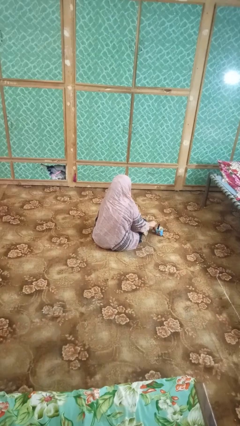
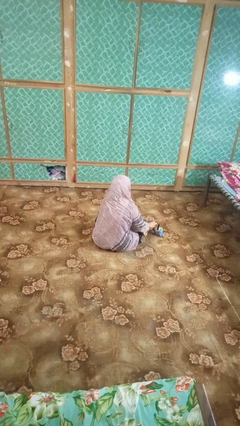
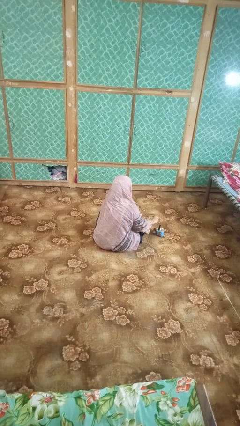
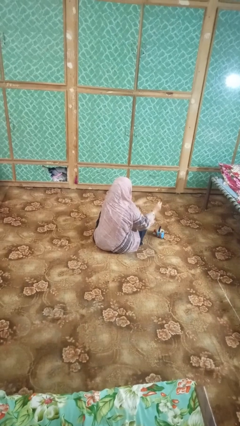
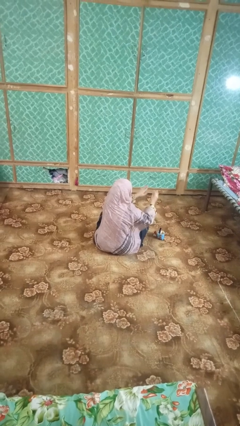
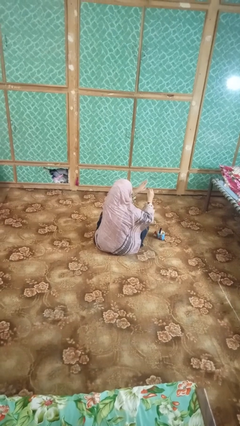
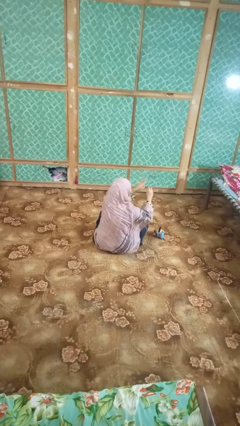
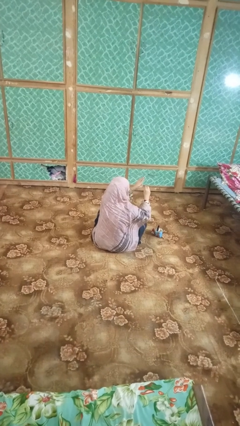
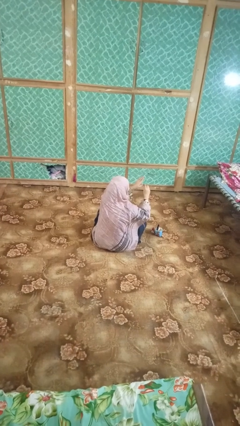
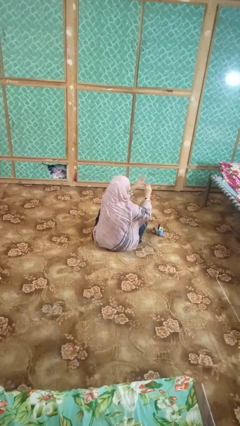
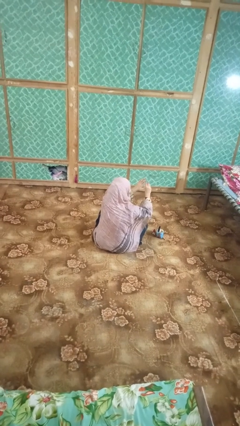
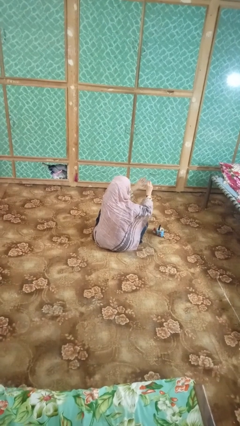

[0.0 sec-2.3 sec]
person paints fingernails

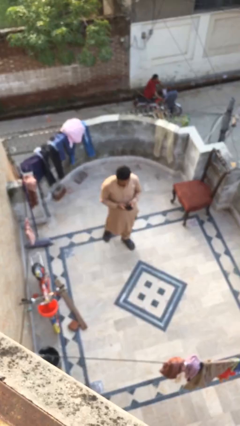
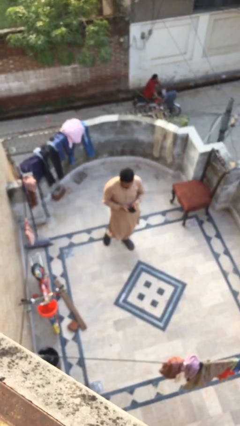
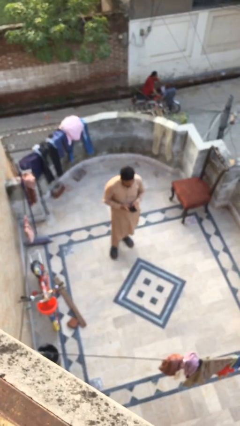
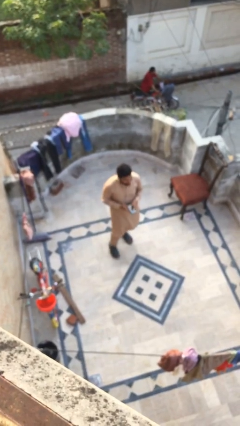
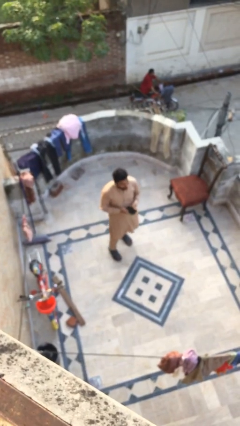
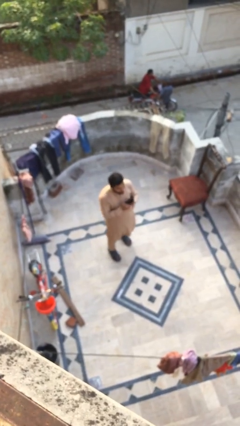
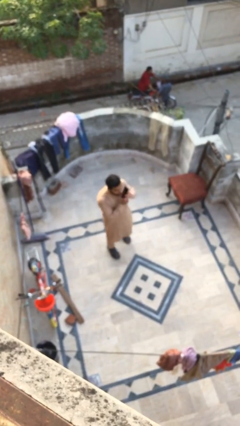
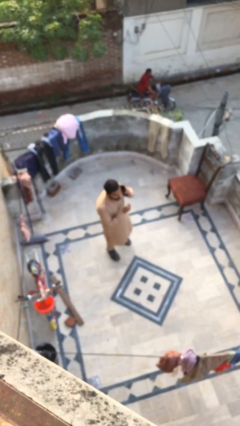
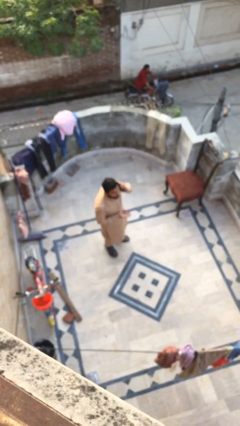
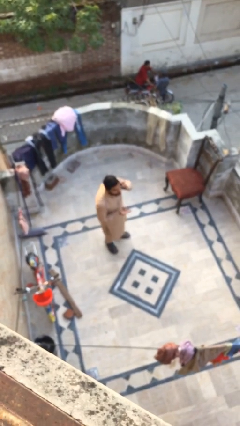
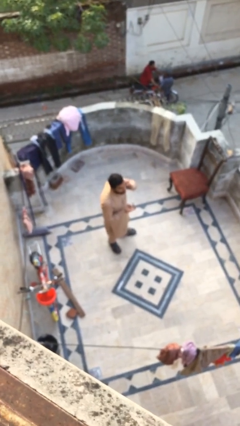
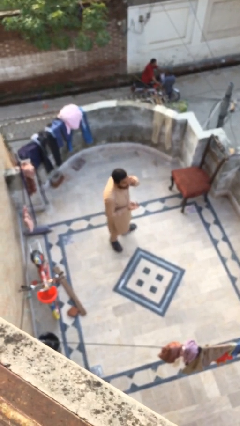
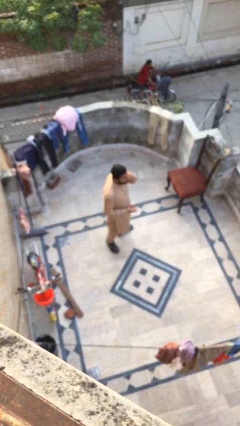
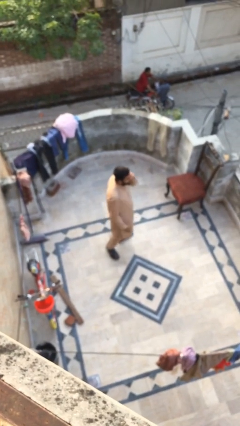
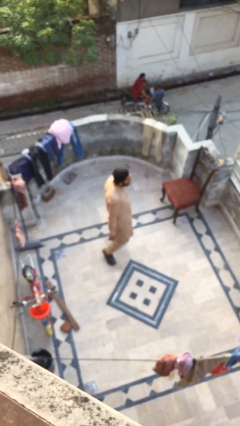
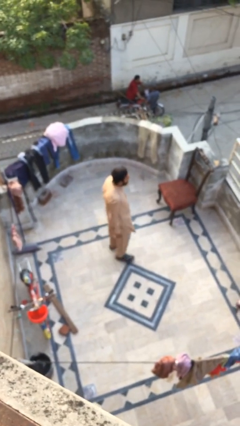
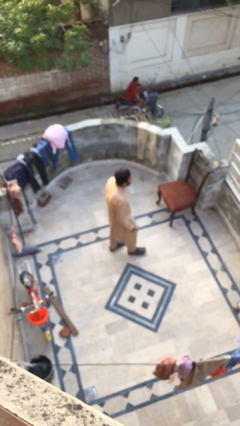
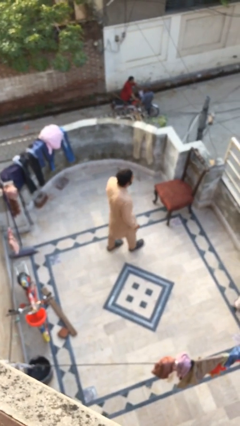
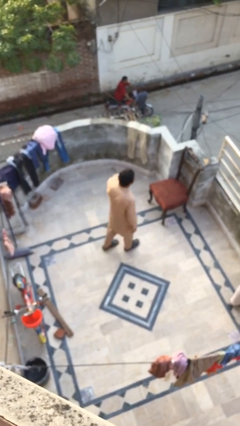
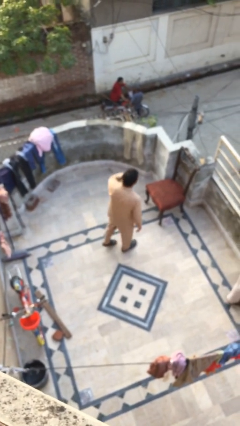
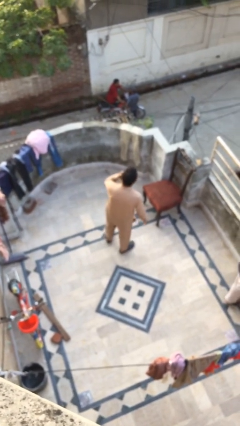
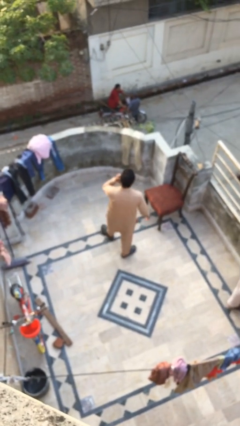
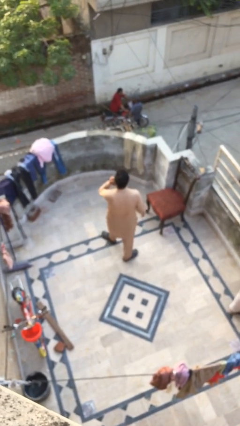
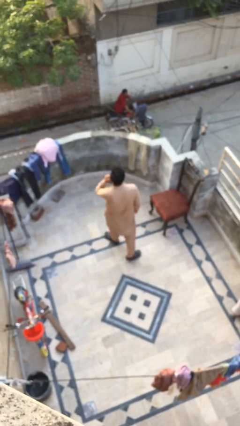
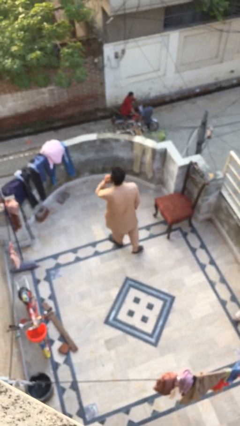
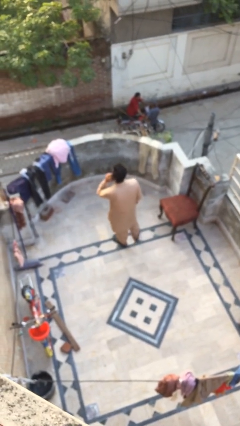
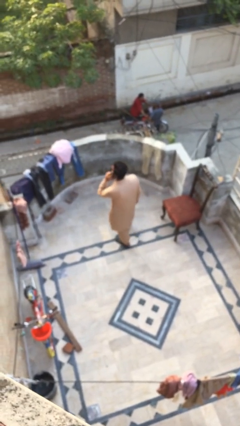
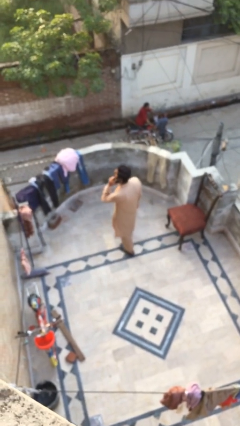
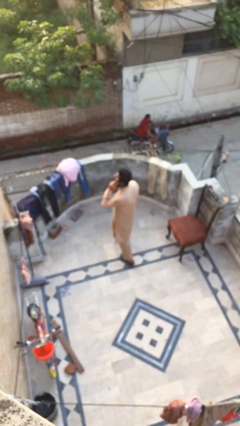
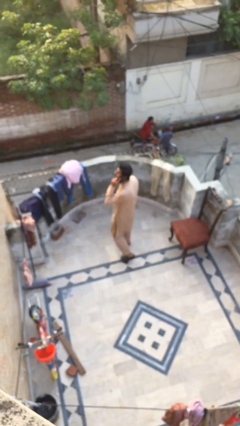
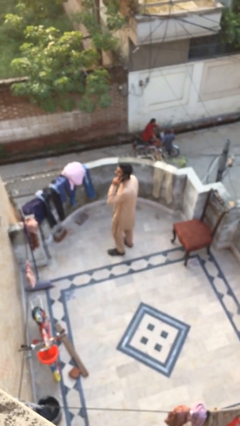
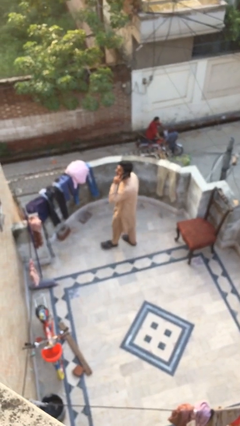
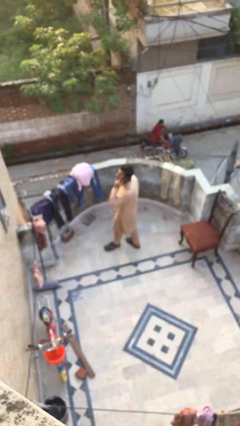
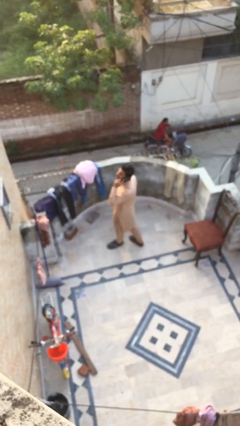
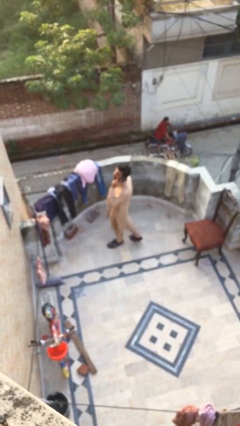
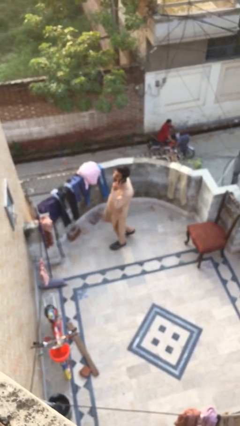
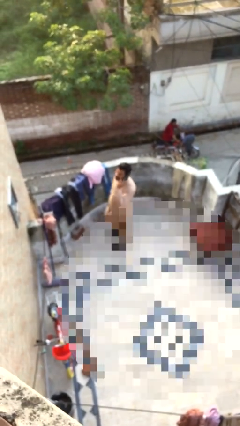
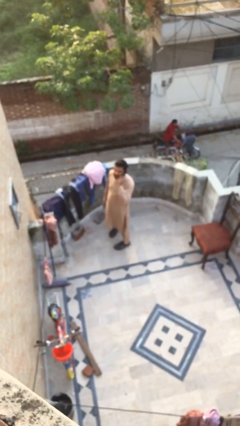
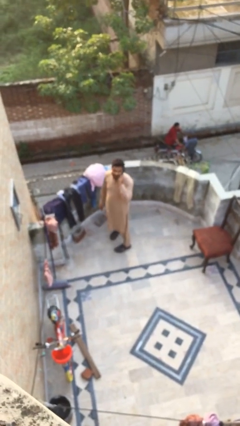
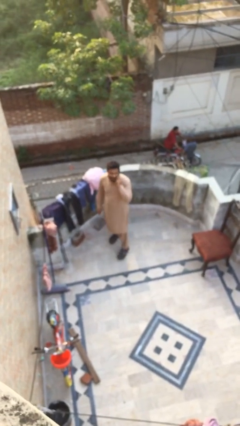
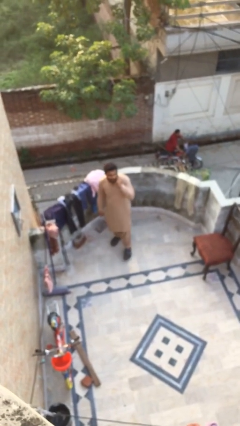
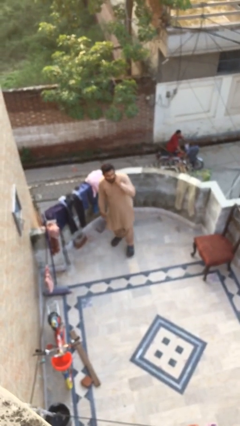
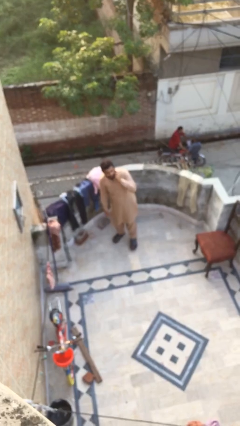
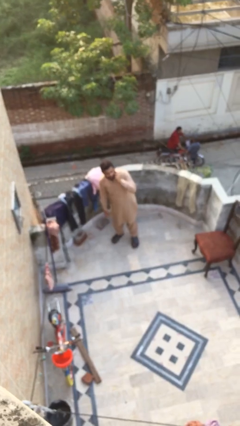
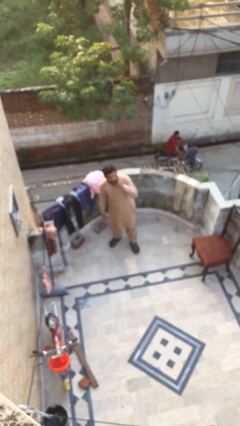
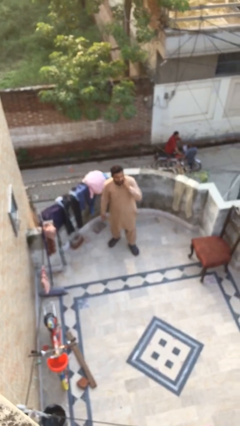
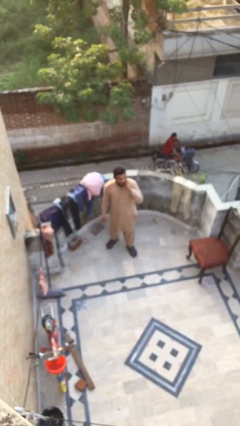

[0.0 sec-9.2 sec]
person talks on phone

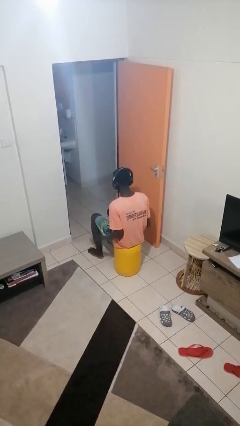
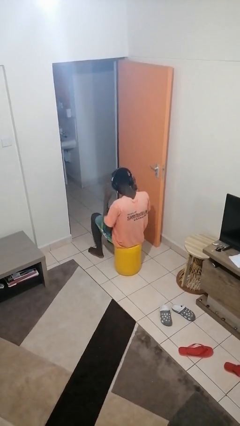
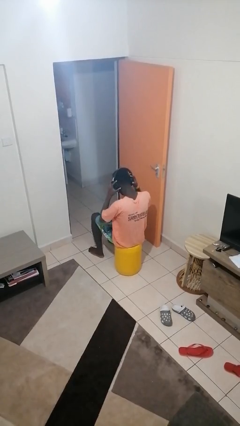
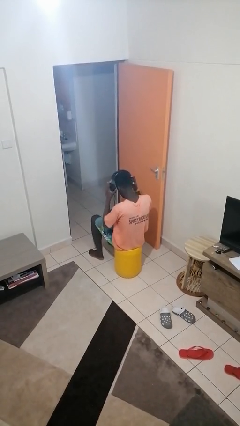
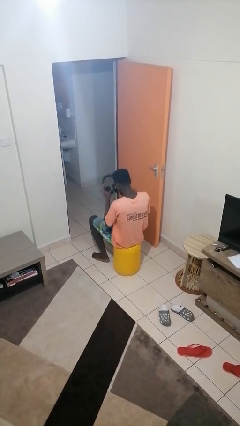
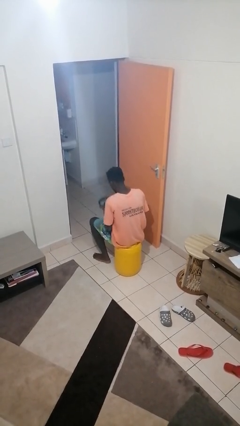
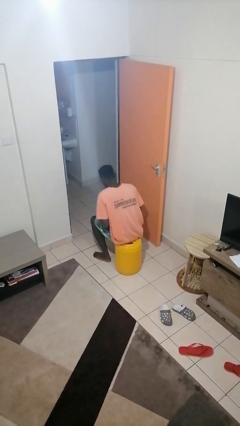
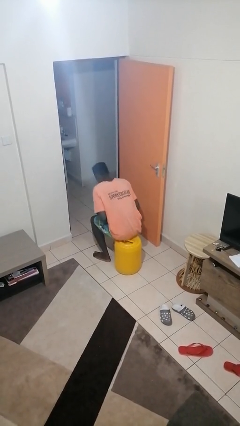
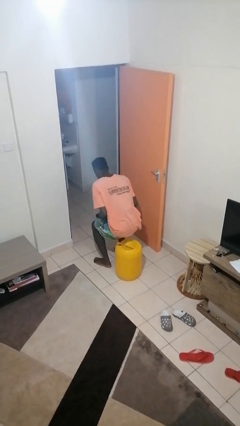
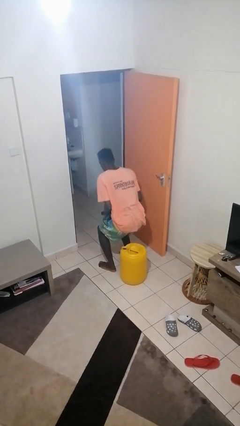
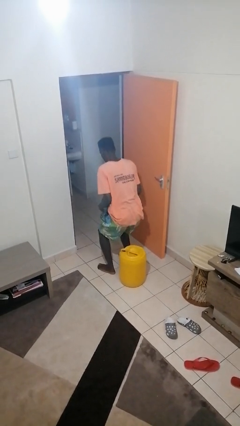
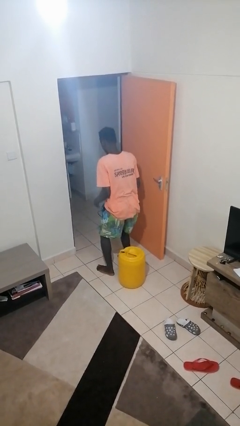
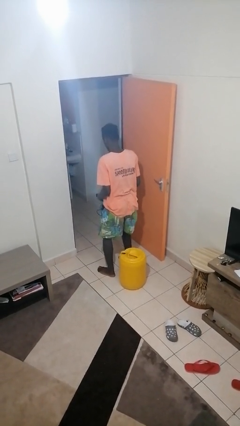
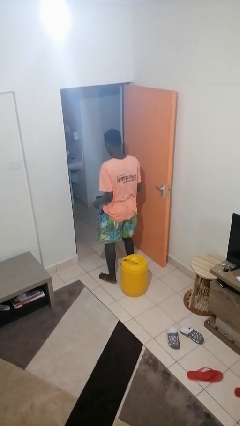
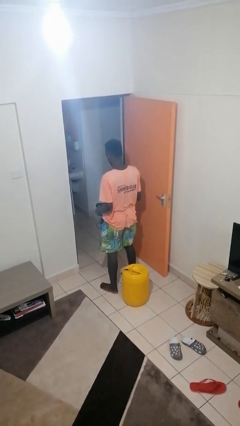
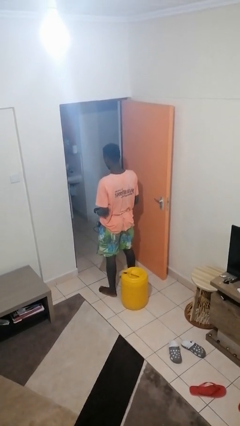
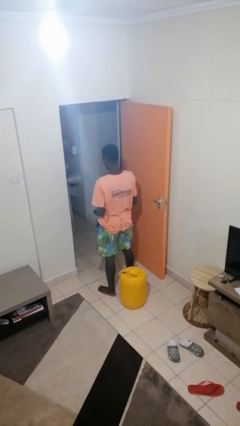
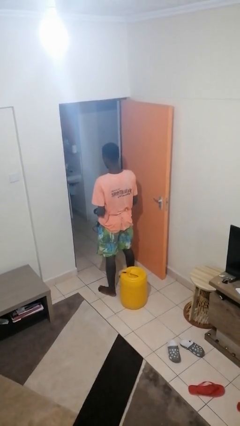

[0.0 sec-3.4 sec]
person takes off headphones

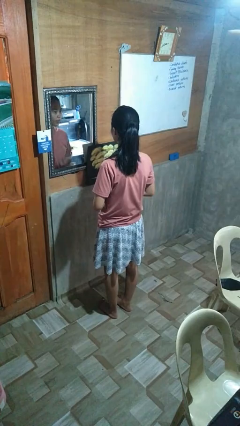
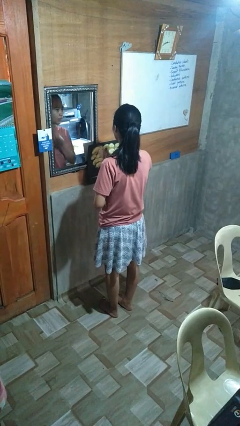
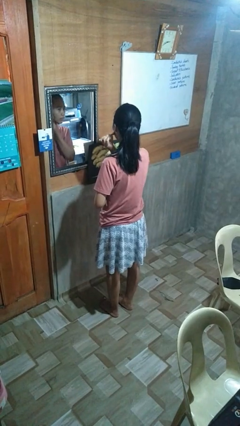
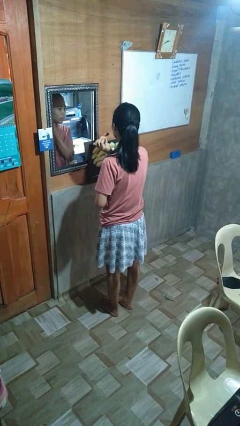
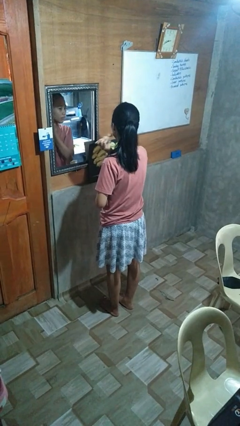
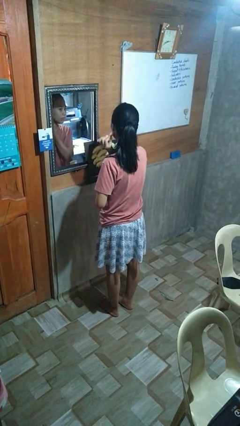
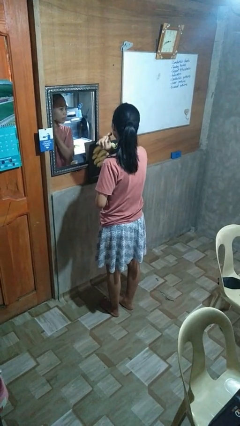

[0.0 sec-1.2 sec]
person applies foundation makeup

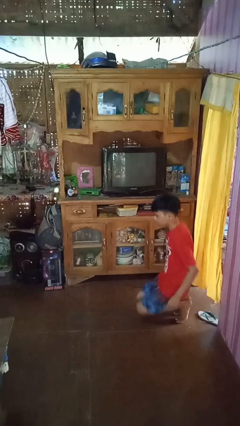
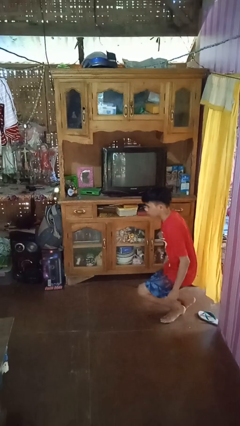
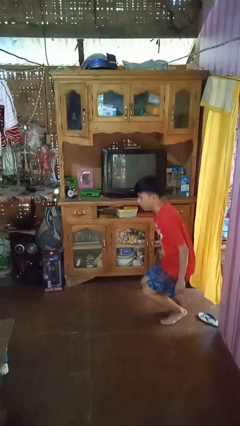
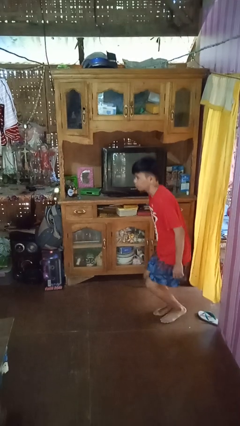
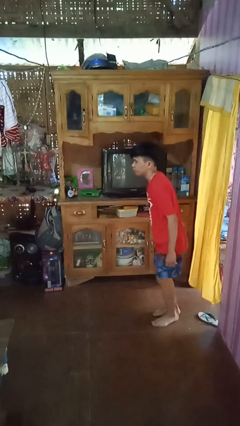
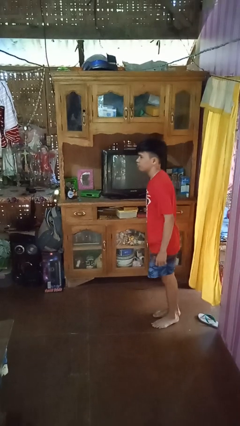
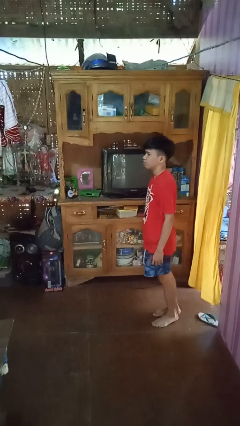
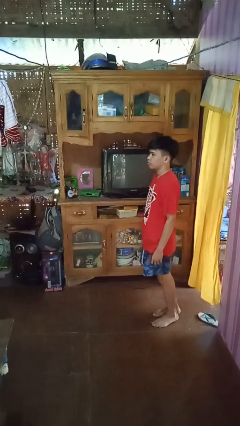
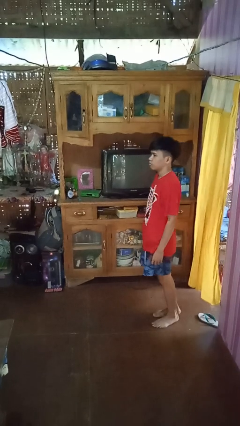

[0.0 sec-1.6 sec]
person stands up from floor
